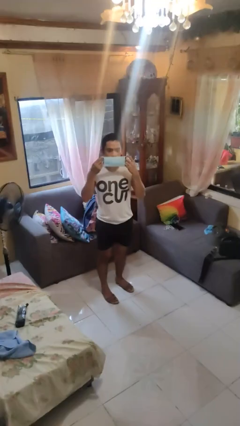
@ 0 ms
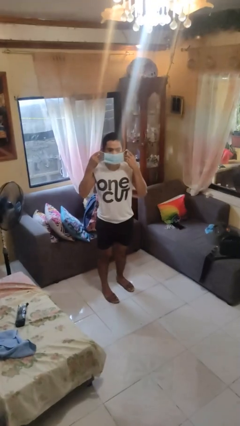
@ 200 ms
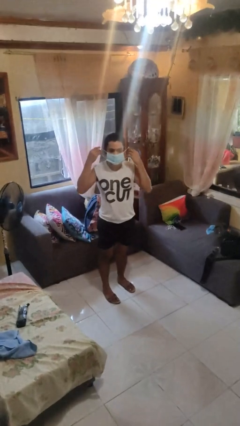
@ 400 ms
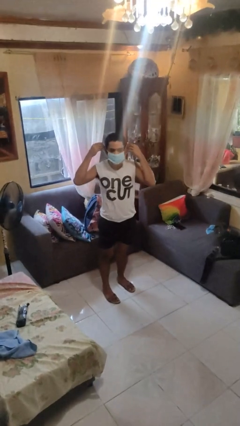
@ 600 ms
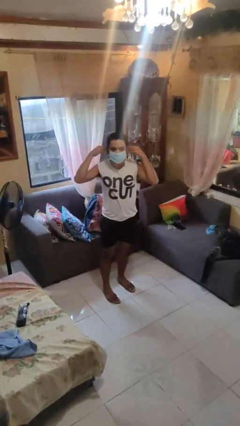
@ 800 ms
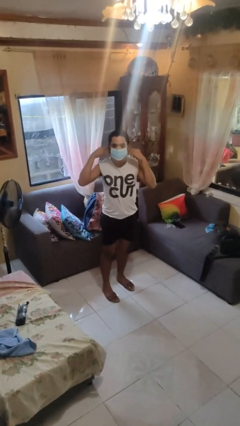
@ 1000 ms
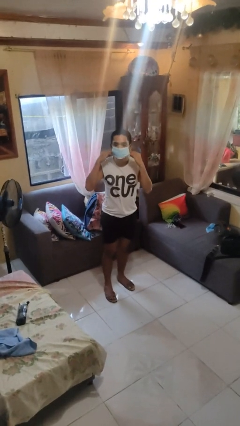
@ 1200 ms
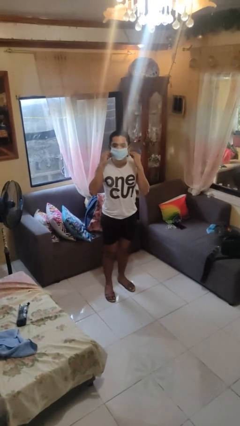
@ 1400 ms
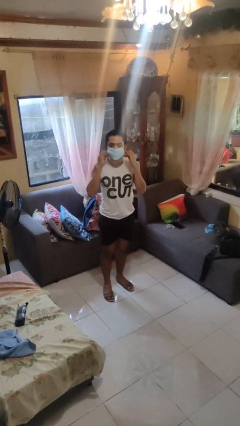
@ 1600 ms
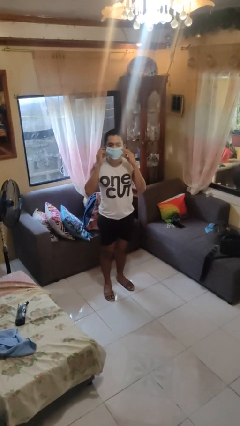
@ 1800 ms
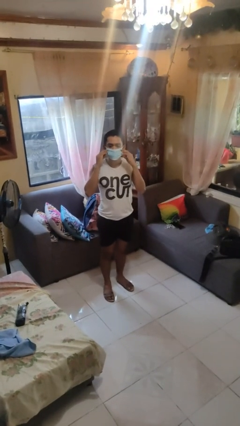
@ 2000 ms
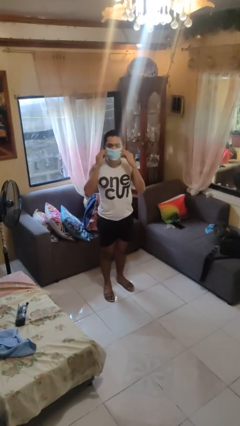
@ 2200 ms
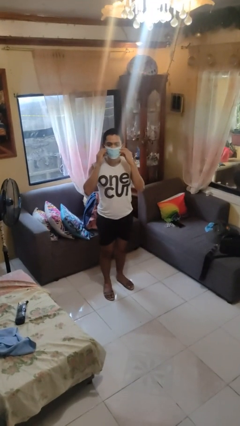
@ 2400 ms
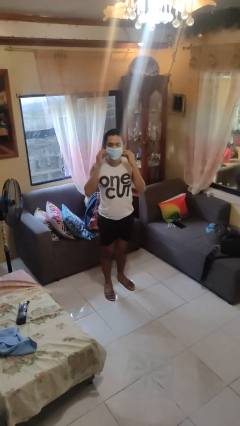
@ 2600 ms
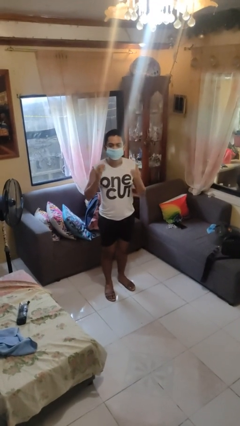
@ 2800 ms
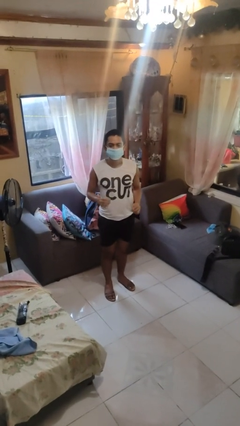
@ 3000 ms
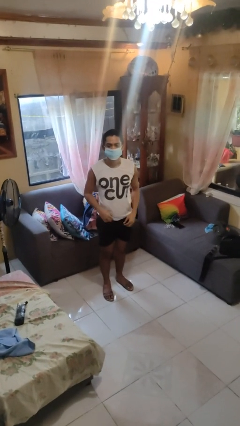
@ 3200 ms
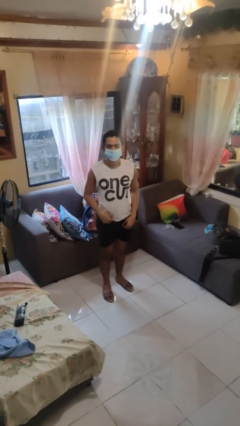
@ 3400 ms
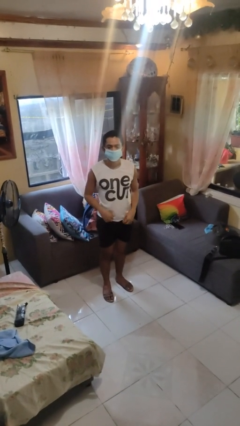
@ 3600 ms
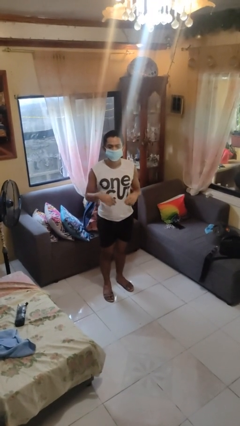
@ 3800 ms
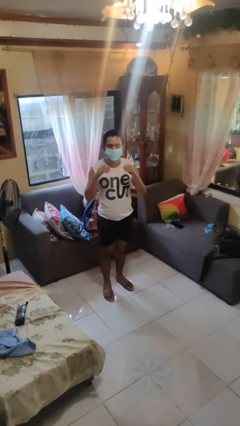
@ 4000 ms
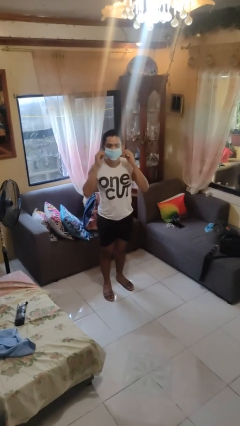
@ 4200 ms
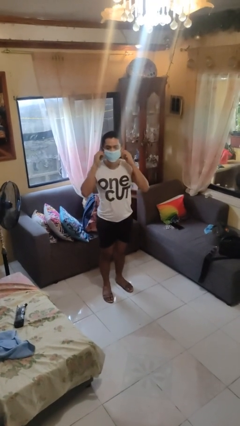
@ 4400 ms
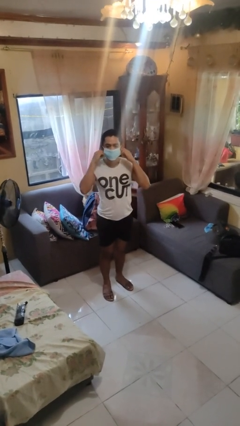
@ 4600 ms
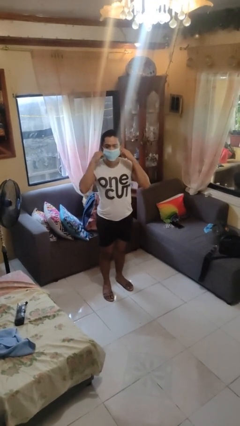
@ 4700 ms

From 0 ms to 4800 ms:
person puts on facemask

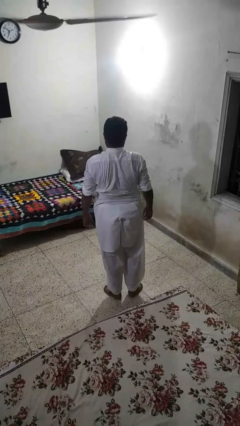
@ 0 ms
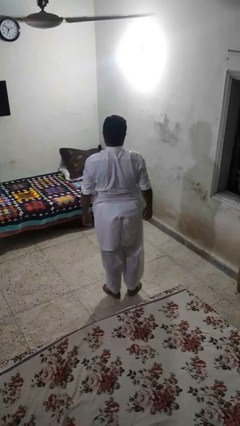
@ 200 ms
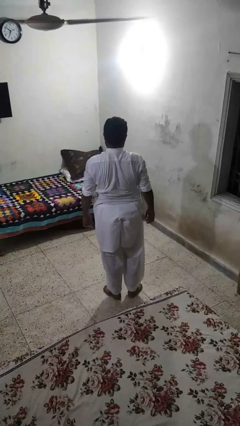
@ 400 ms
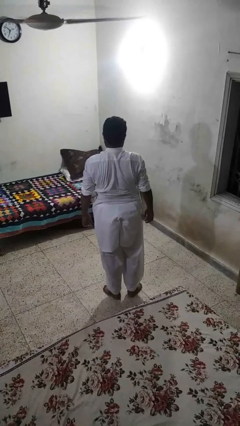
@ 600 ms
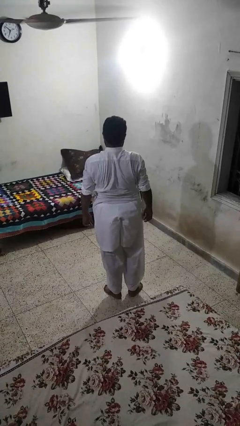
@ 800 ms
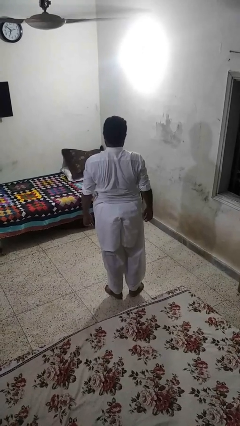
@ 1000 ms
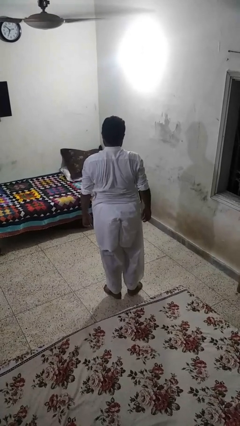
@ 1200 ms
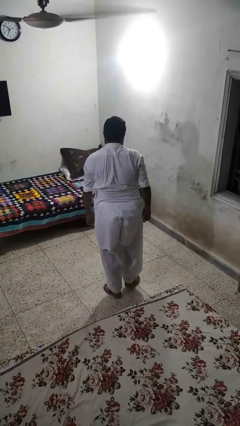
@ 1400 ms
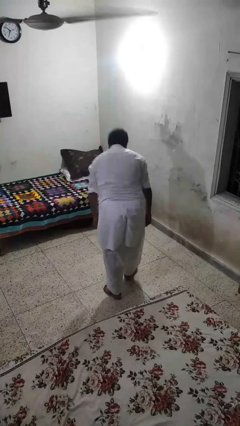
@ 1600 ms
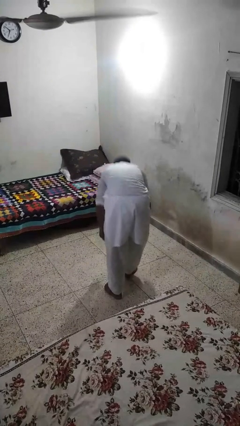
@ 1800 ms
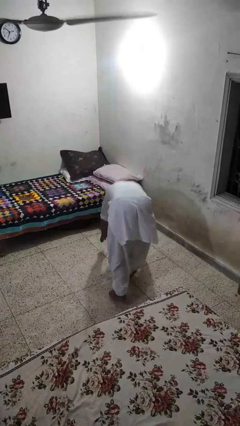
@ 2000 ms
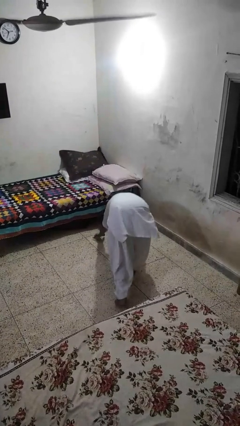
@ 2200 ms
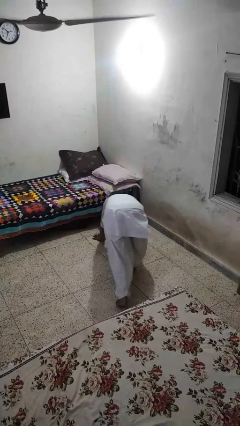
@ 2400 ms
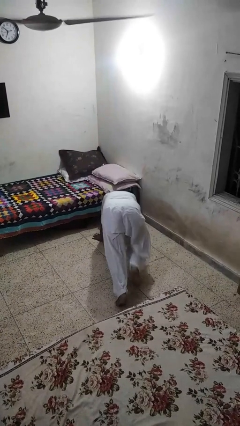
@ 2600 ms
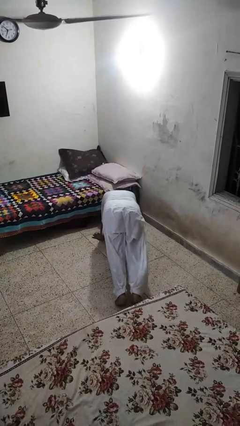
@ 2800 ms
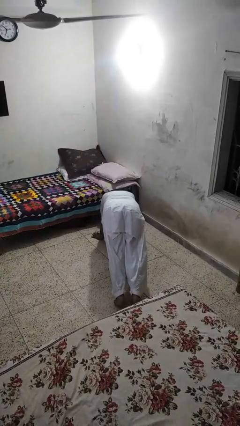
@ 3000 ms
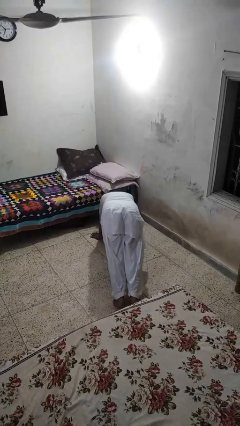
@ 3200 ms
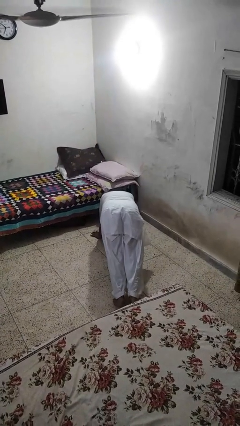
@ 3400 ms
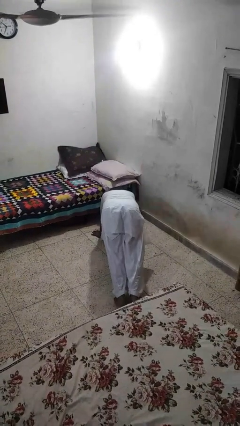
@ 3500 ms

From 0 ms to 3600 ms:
person exercises with plank

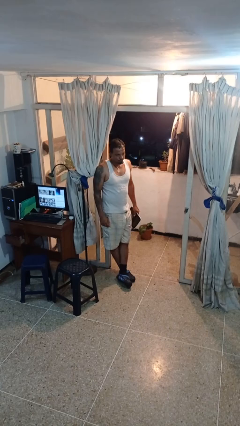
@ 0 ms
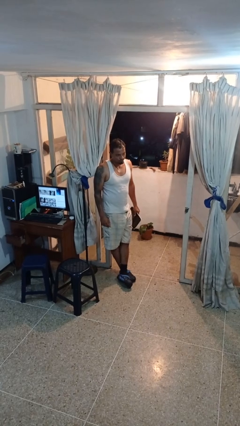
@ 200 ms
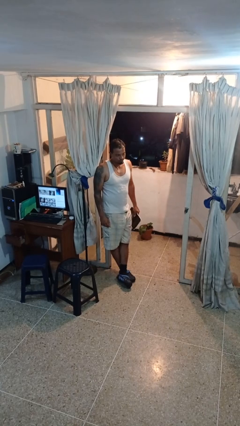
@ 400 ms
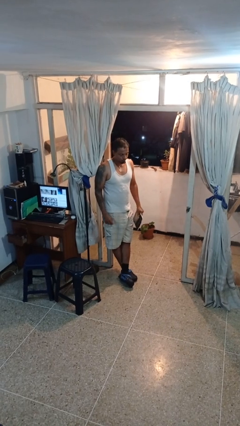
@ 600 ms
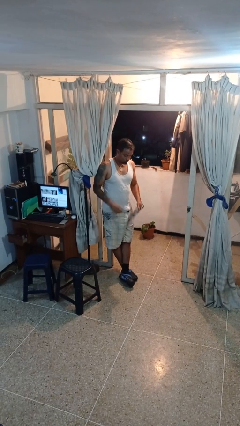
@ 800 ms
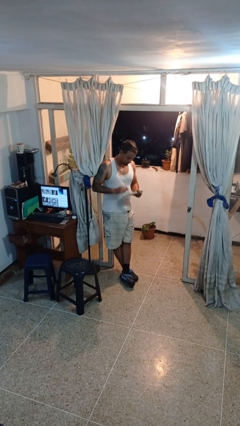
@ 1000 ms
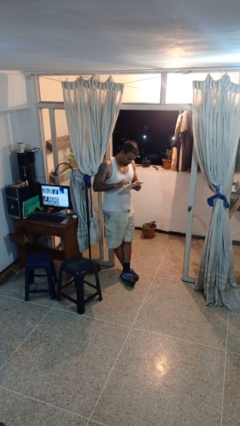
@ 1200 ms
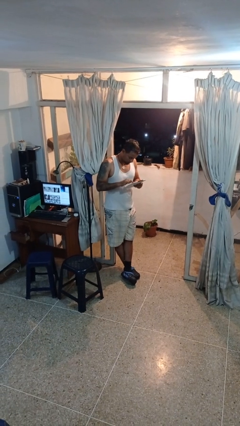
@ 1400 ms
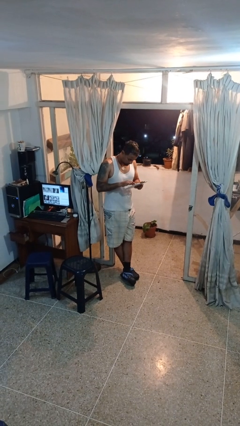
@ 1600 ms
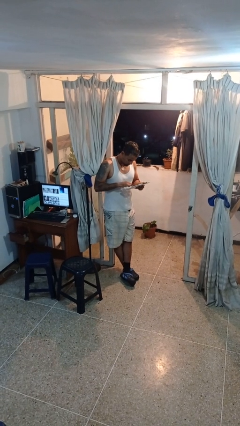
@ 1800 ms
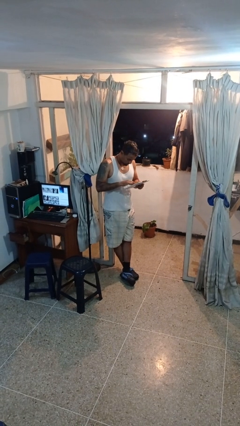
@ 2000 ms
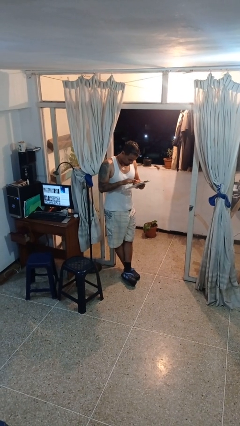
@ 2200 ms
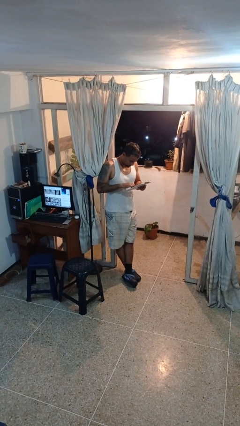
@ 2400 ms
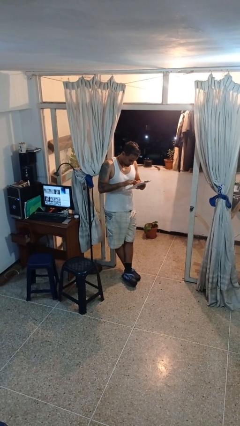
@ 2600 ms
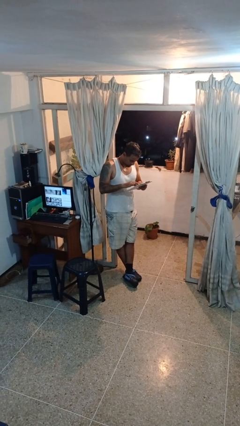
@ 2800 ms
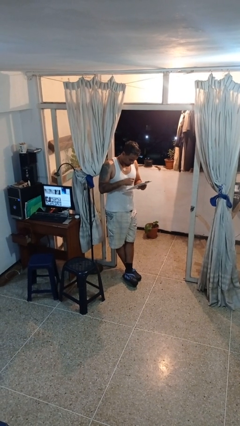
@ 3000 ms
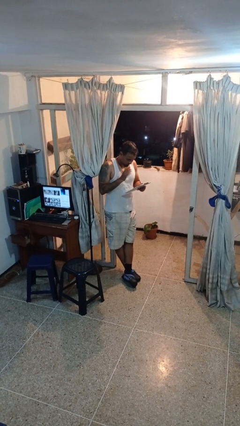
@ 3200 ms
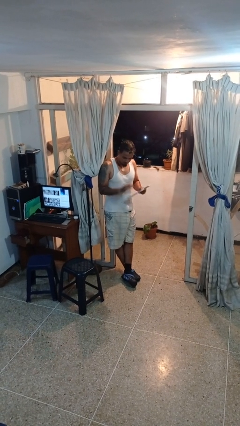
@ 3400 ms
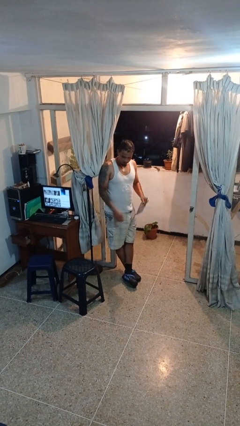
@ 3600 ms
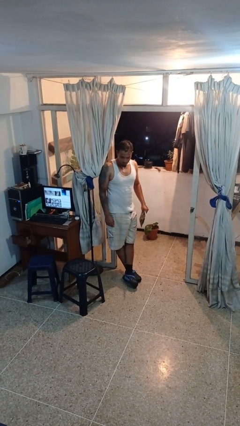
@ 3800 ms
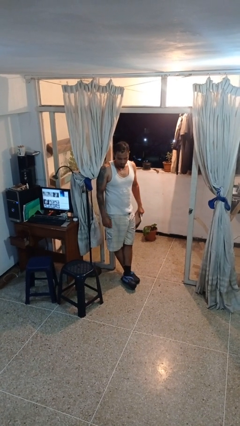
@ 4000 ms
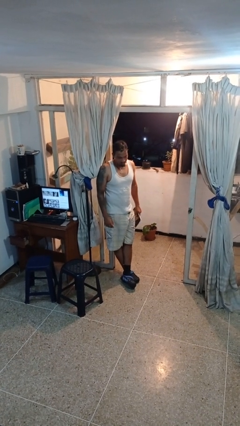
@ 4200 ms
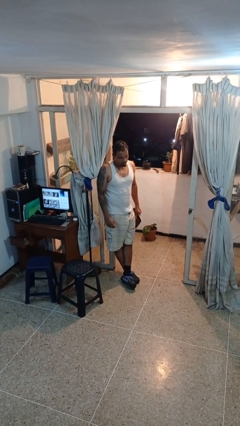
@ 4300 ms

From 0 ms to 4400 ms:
person interacts with tablet

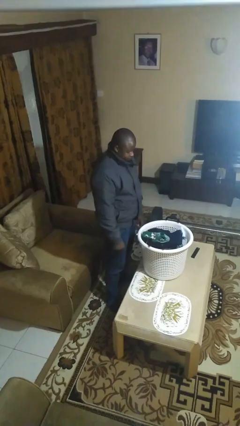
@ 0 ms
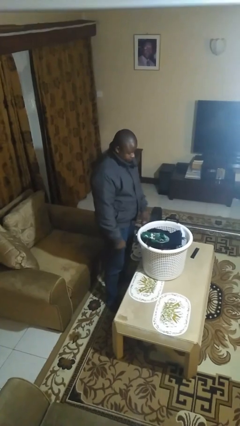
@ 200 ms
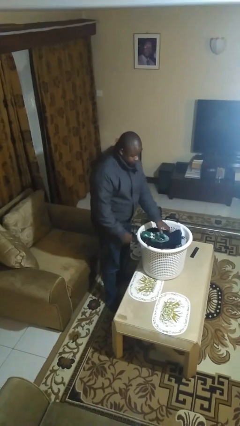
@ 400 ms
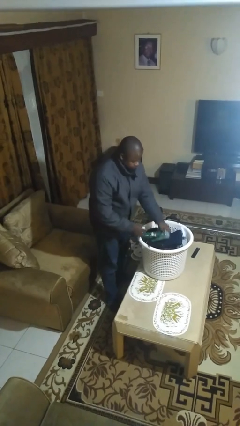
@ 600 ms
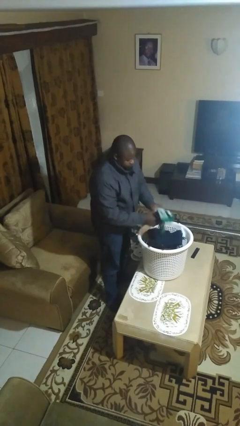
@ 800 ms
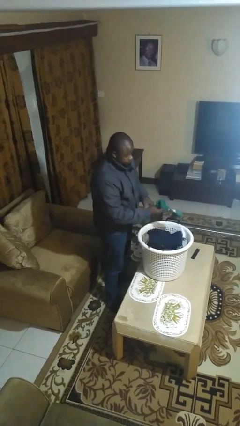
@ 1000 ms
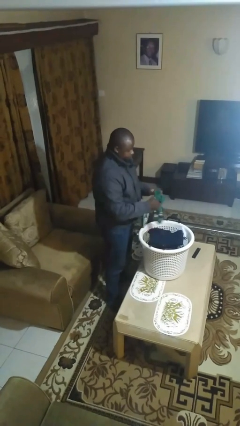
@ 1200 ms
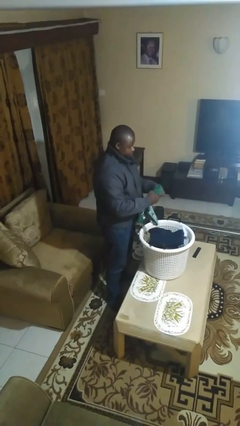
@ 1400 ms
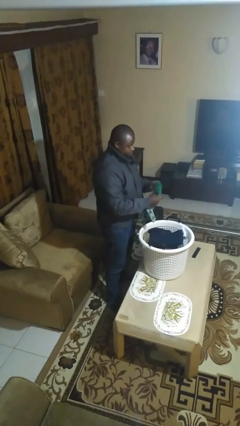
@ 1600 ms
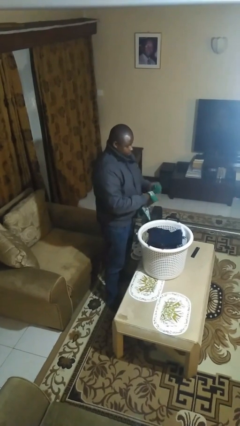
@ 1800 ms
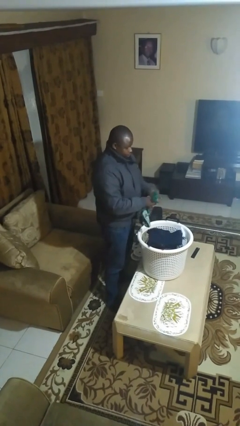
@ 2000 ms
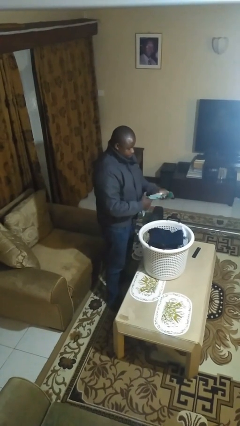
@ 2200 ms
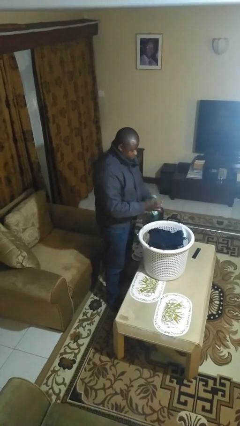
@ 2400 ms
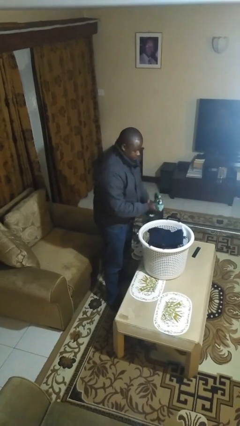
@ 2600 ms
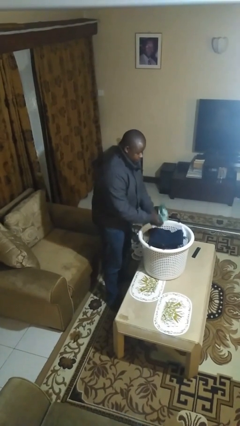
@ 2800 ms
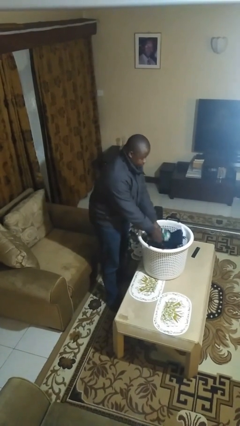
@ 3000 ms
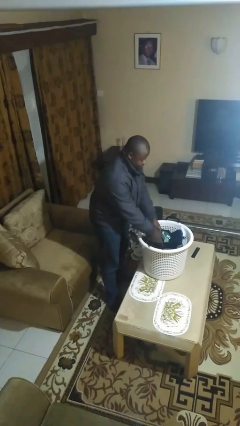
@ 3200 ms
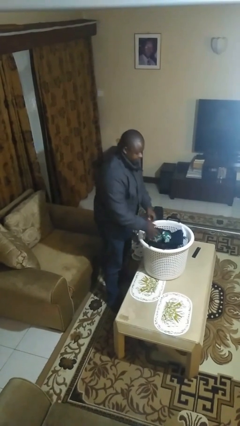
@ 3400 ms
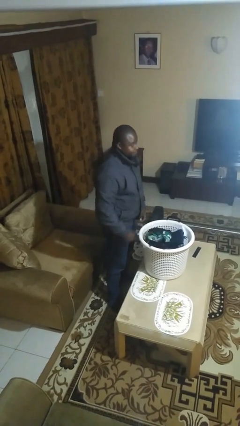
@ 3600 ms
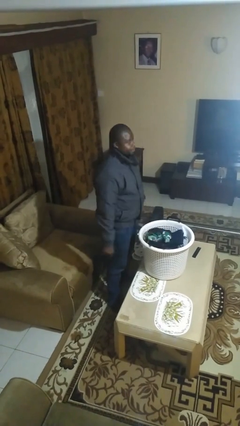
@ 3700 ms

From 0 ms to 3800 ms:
person folds socks

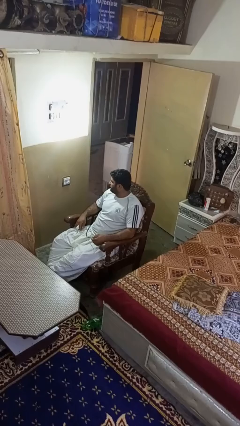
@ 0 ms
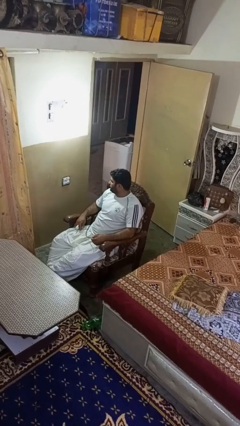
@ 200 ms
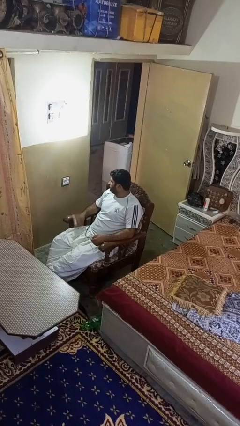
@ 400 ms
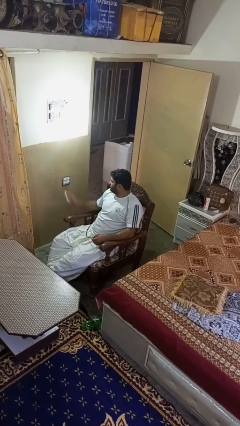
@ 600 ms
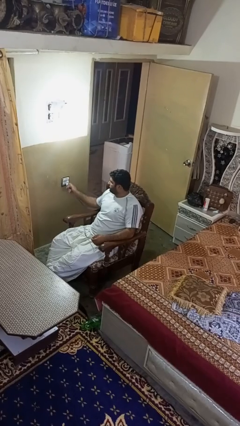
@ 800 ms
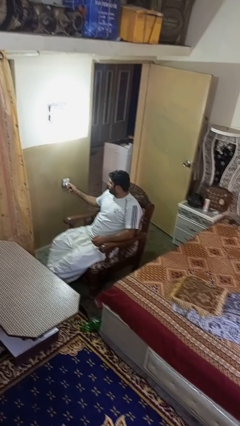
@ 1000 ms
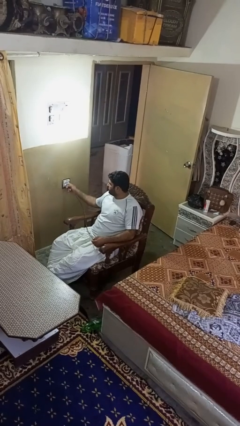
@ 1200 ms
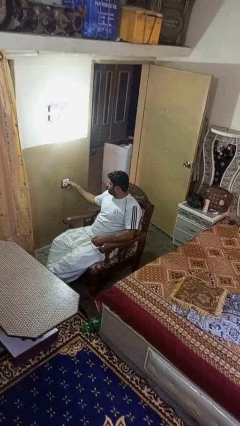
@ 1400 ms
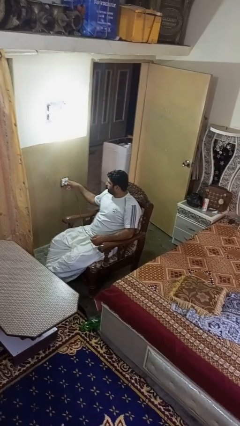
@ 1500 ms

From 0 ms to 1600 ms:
person plugs into electrical socket
